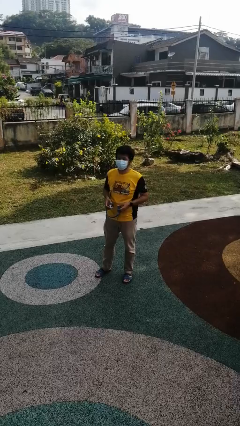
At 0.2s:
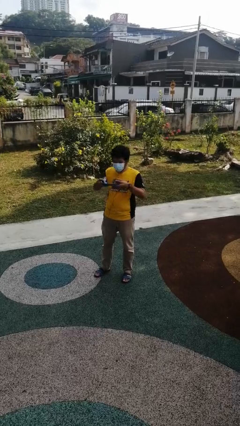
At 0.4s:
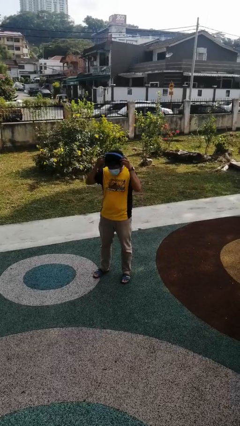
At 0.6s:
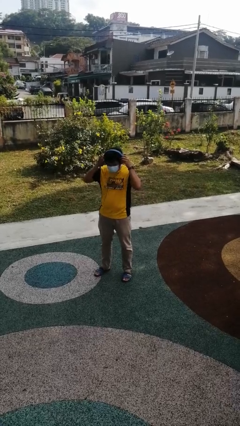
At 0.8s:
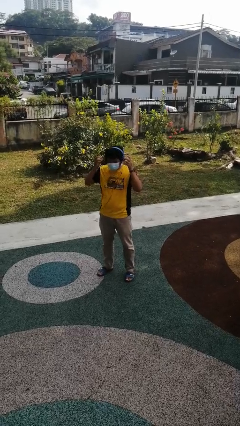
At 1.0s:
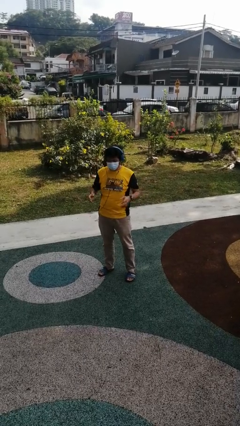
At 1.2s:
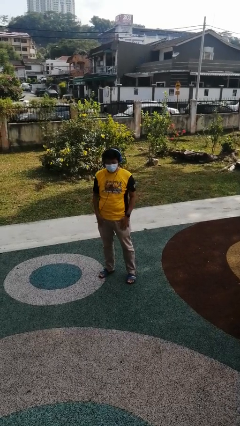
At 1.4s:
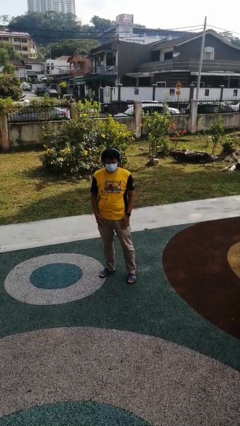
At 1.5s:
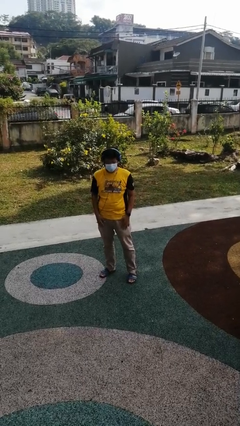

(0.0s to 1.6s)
person puts on headphones

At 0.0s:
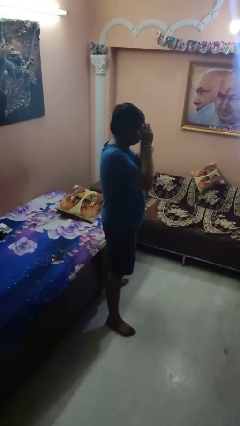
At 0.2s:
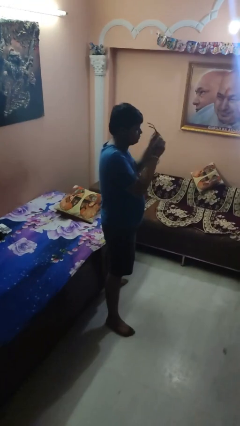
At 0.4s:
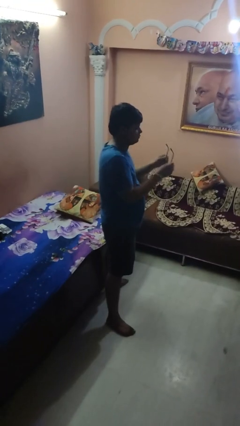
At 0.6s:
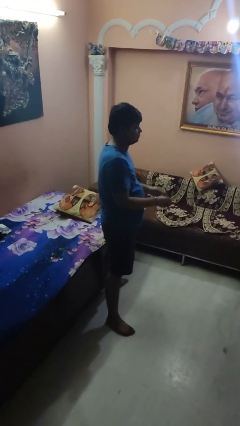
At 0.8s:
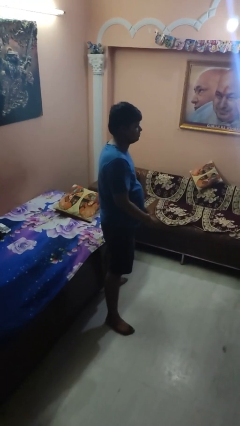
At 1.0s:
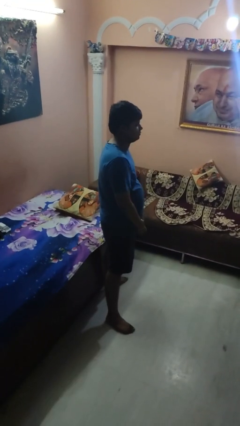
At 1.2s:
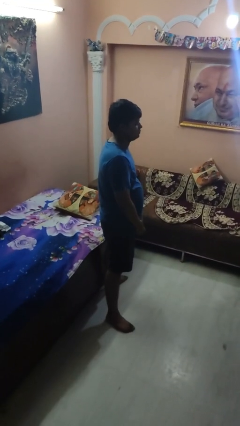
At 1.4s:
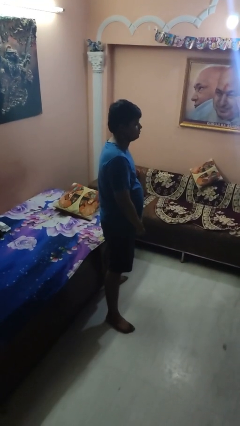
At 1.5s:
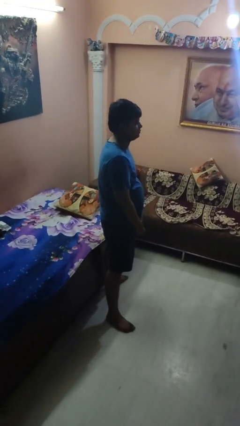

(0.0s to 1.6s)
person takes off glasses

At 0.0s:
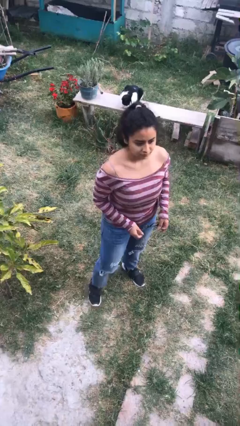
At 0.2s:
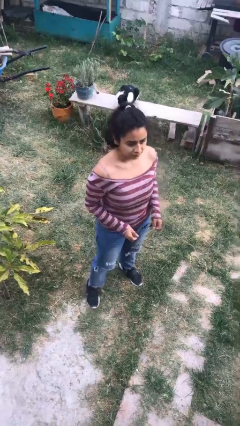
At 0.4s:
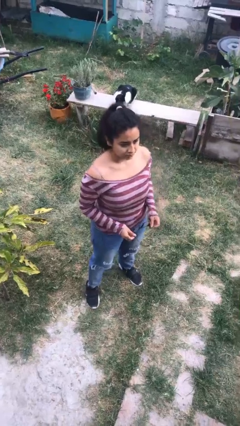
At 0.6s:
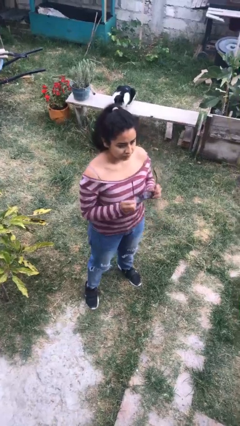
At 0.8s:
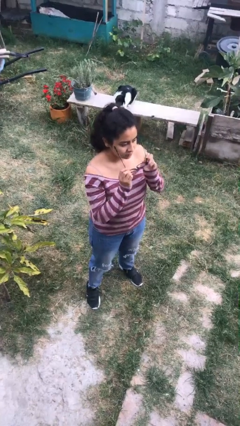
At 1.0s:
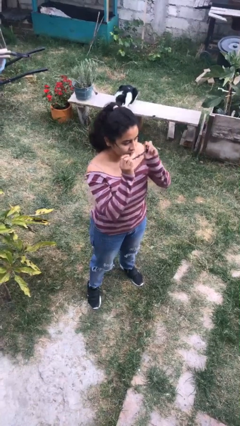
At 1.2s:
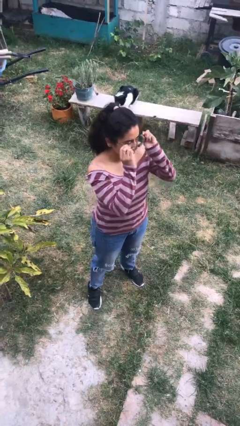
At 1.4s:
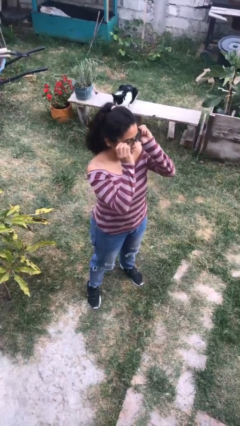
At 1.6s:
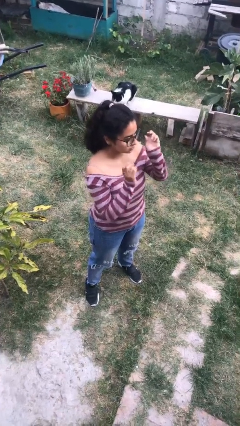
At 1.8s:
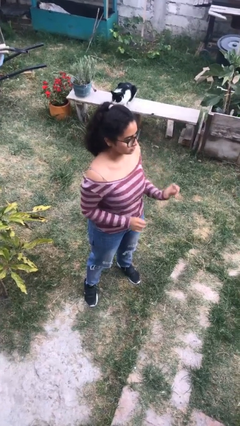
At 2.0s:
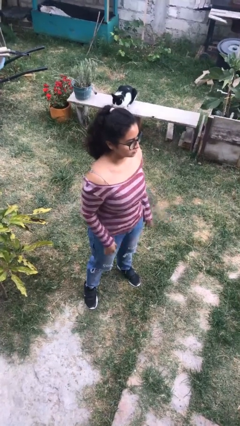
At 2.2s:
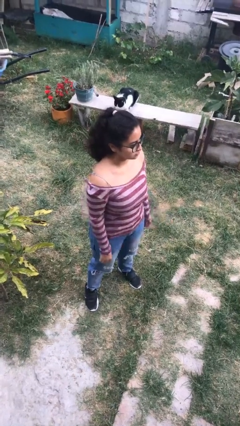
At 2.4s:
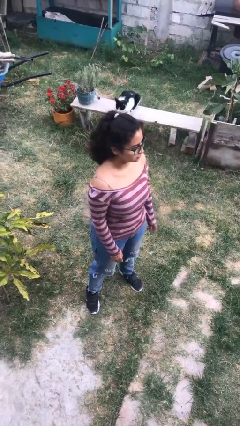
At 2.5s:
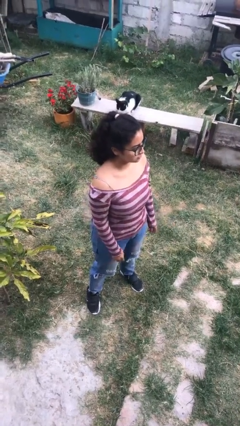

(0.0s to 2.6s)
person puts on glasses

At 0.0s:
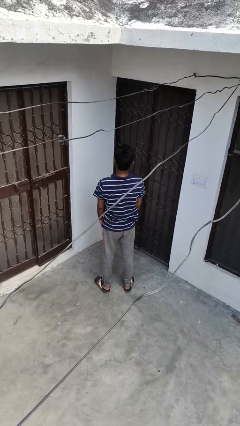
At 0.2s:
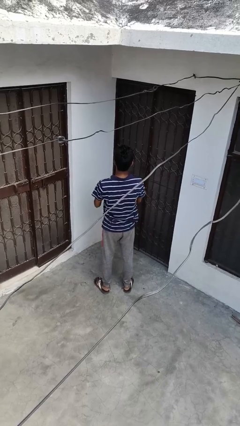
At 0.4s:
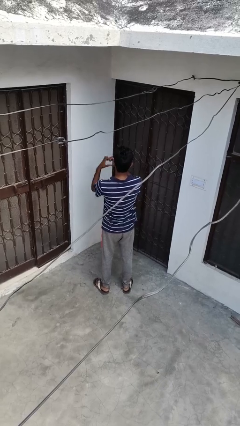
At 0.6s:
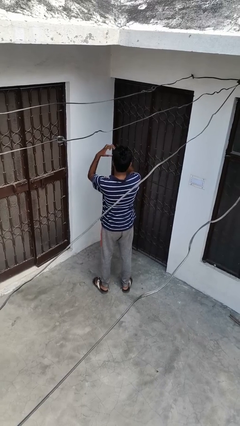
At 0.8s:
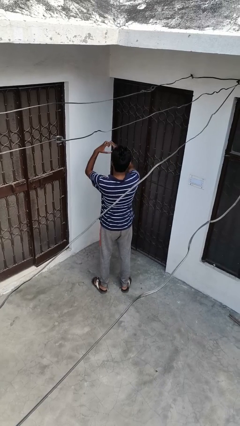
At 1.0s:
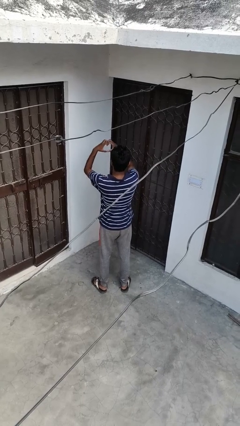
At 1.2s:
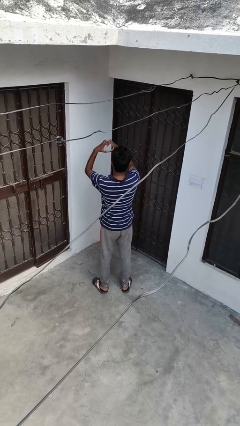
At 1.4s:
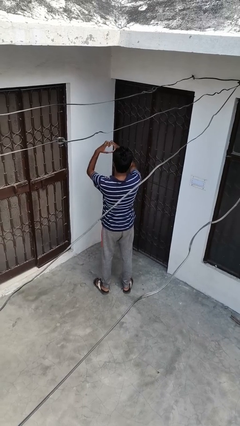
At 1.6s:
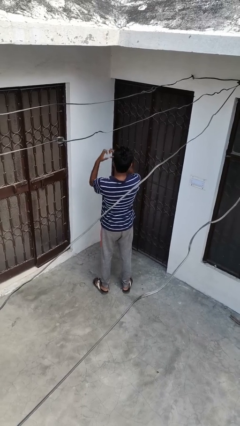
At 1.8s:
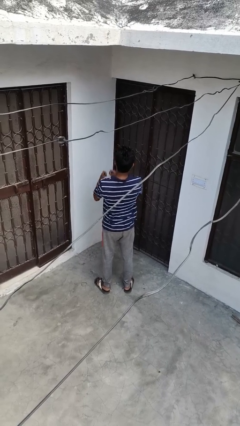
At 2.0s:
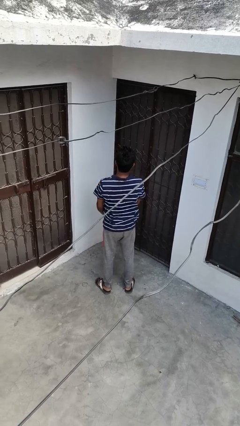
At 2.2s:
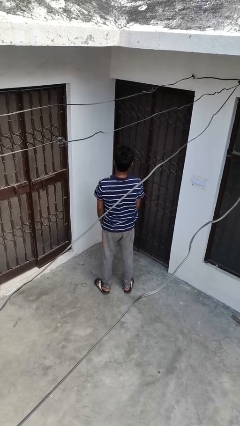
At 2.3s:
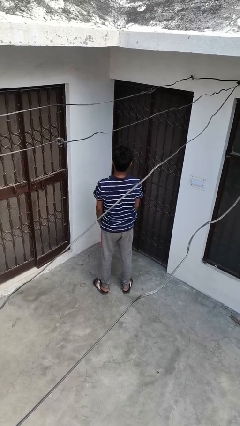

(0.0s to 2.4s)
person gestures heart

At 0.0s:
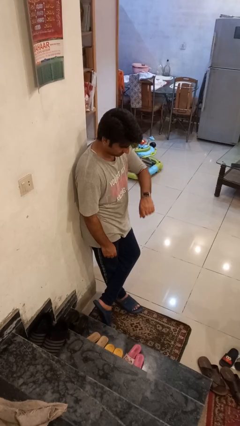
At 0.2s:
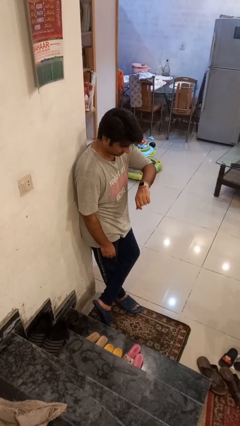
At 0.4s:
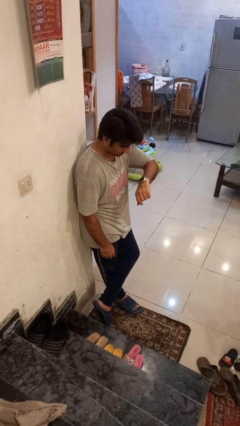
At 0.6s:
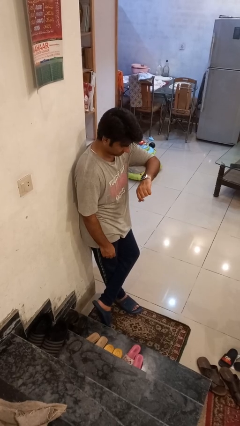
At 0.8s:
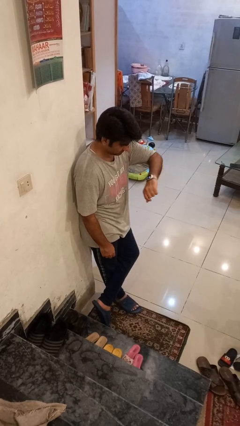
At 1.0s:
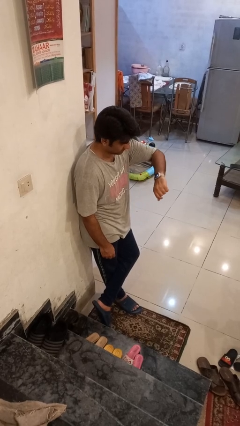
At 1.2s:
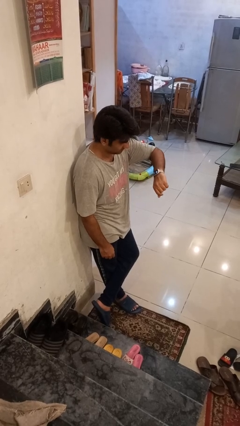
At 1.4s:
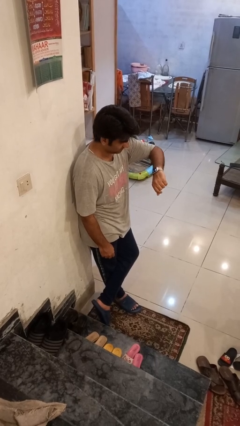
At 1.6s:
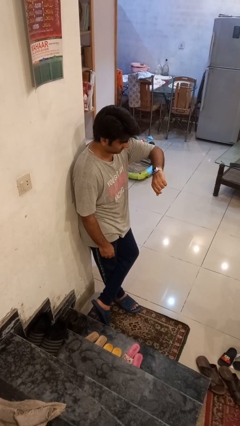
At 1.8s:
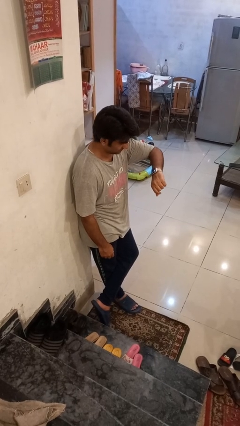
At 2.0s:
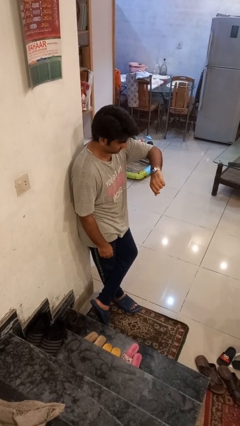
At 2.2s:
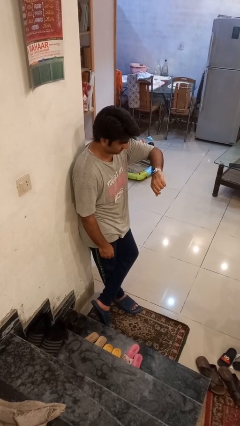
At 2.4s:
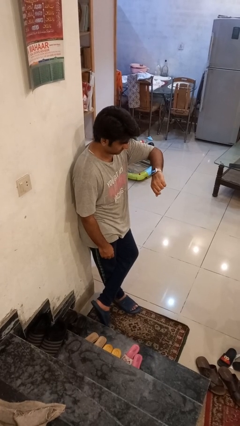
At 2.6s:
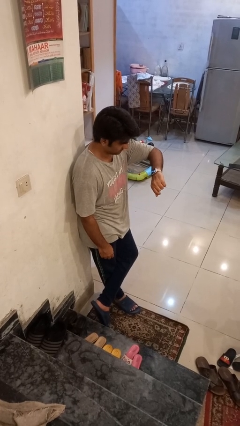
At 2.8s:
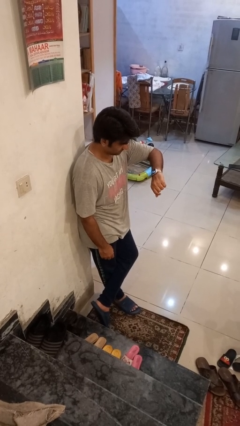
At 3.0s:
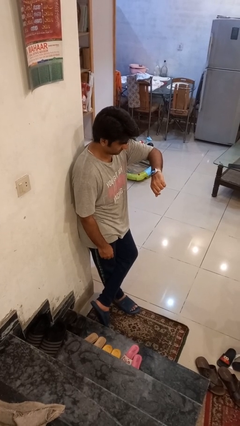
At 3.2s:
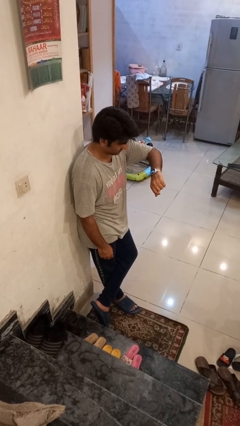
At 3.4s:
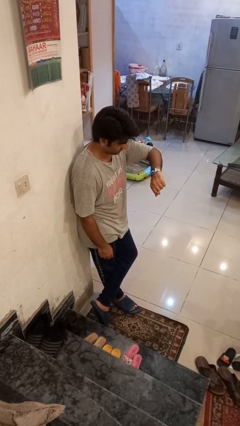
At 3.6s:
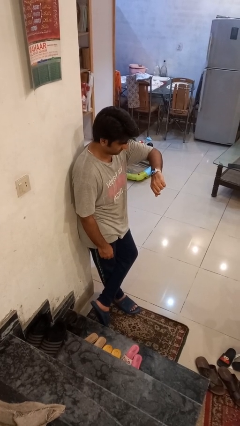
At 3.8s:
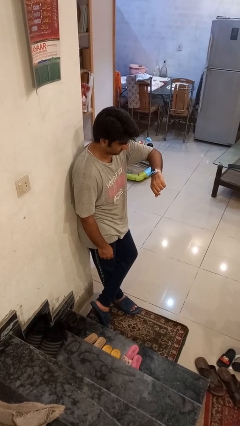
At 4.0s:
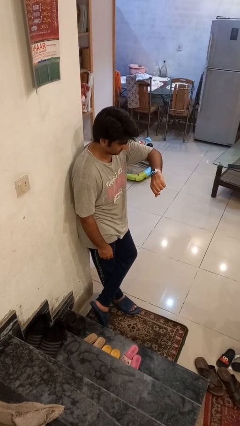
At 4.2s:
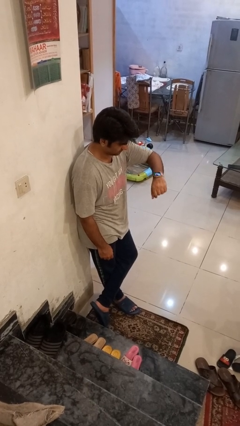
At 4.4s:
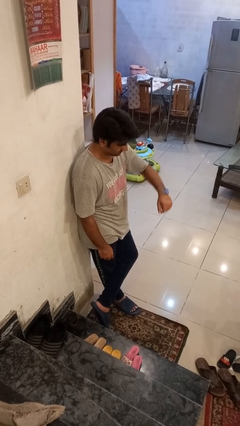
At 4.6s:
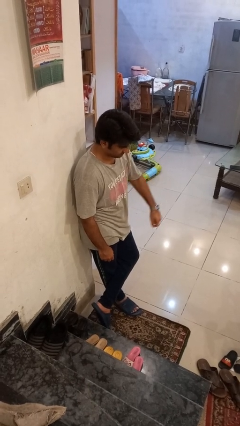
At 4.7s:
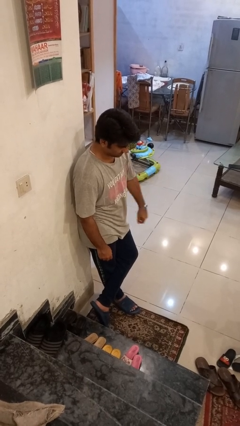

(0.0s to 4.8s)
person looks at wristwatch

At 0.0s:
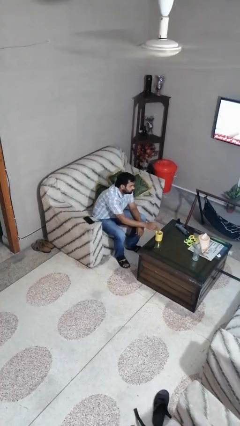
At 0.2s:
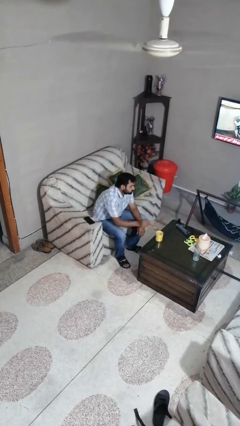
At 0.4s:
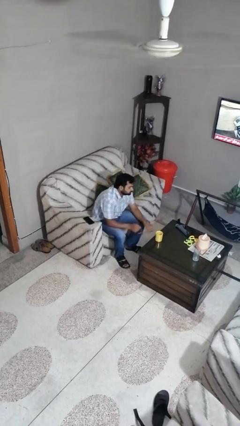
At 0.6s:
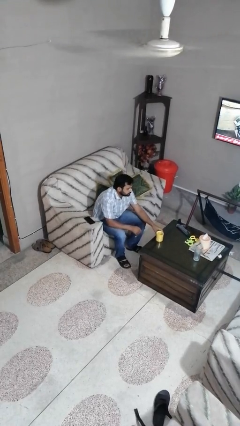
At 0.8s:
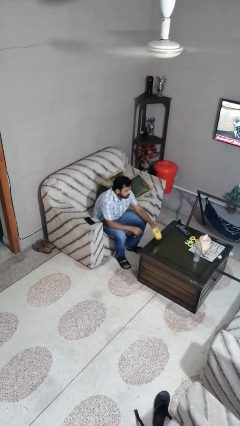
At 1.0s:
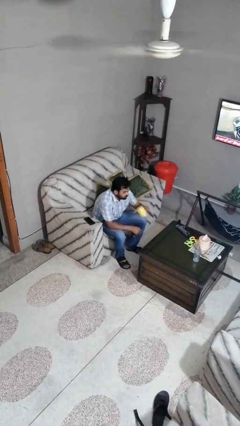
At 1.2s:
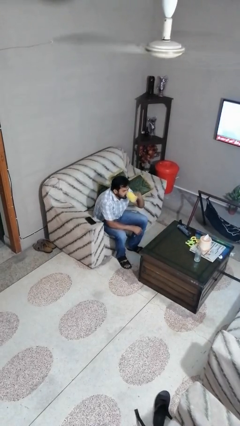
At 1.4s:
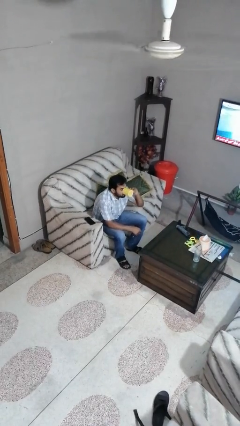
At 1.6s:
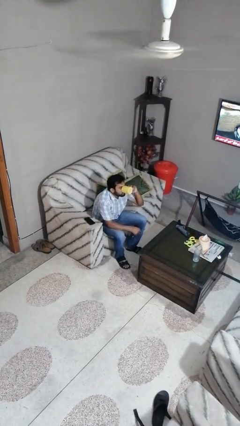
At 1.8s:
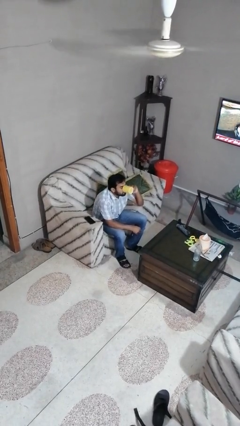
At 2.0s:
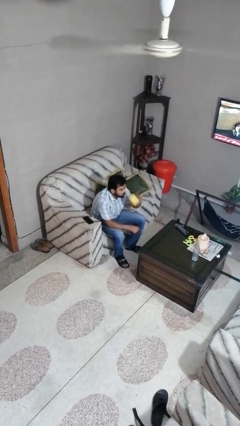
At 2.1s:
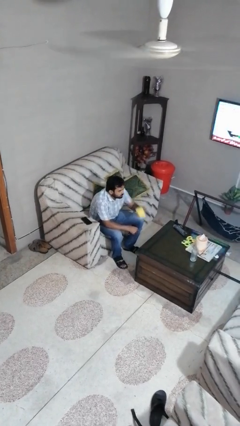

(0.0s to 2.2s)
person drinks from mug

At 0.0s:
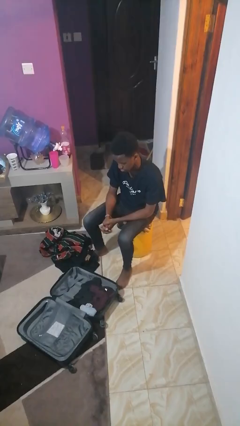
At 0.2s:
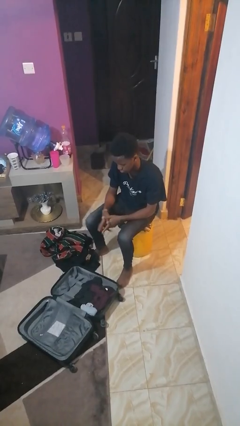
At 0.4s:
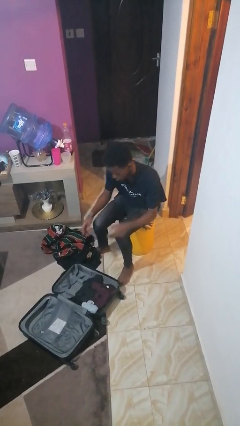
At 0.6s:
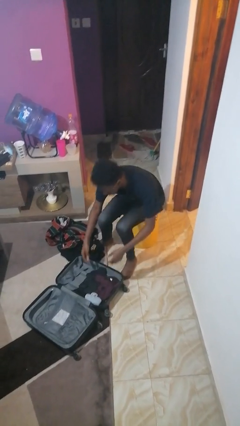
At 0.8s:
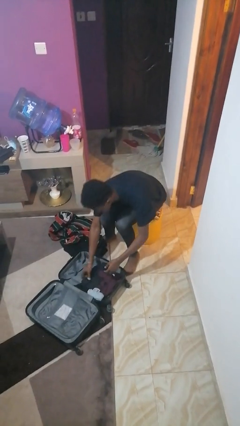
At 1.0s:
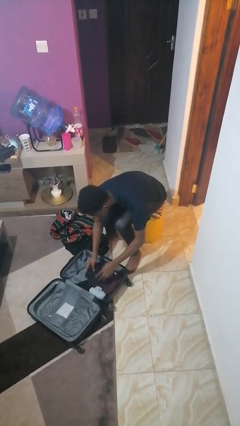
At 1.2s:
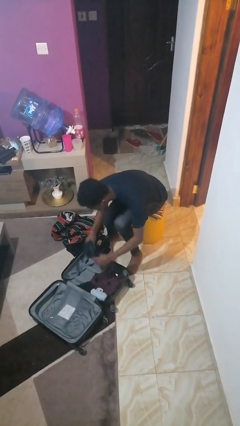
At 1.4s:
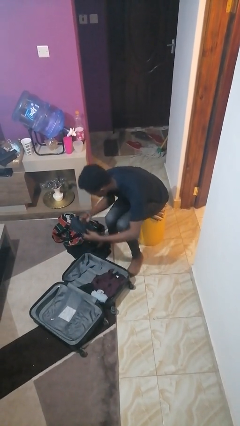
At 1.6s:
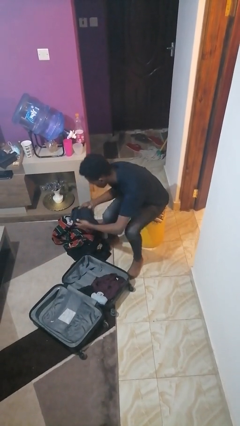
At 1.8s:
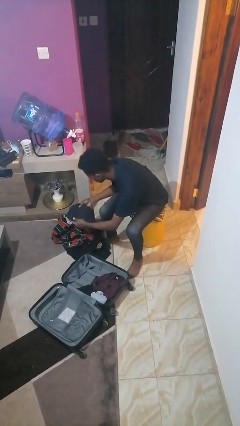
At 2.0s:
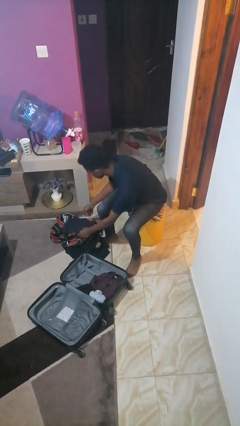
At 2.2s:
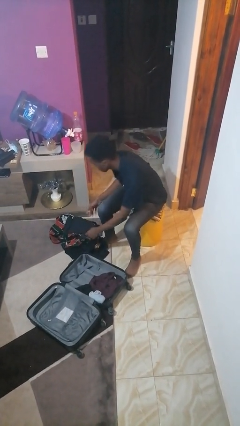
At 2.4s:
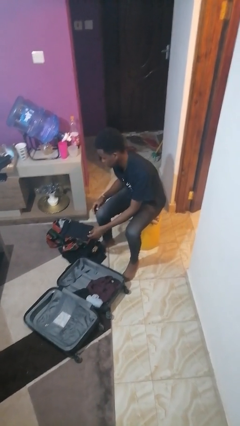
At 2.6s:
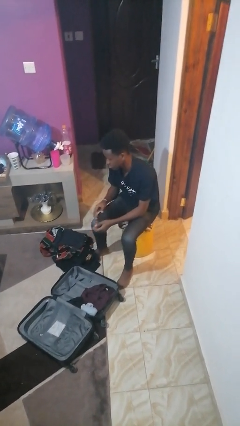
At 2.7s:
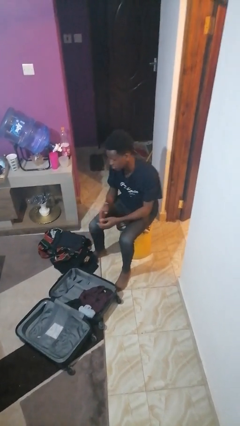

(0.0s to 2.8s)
person unloads clothes from suitcase
